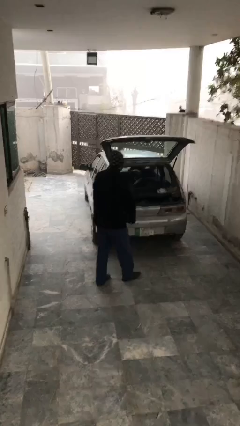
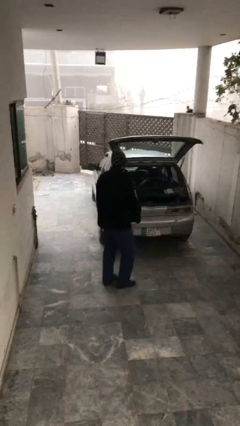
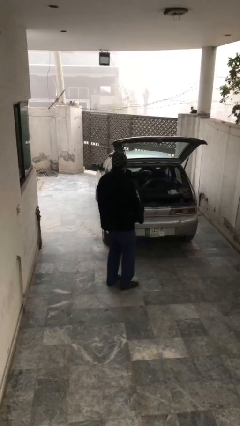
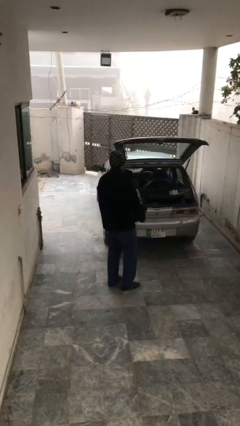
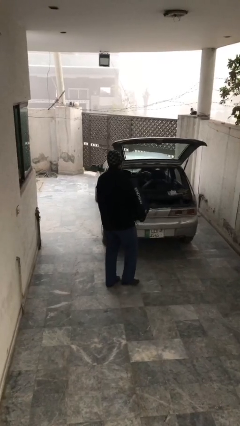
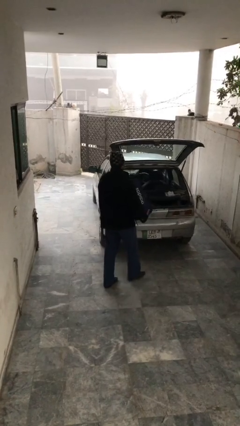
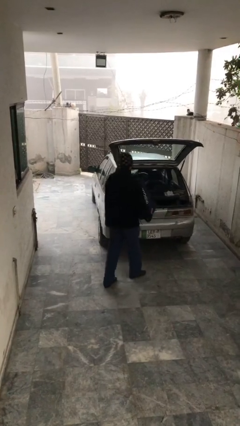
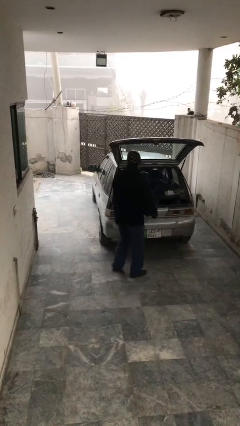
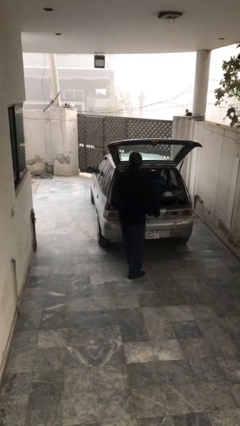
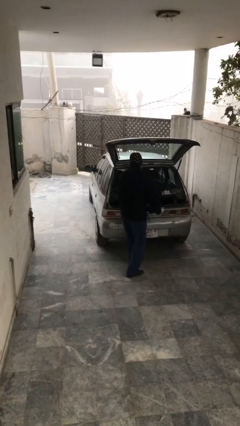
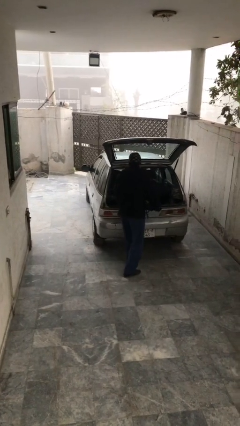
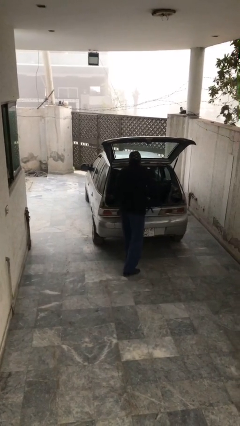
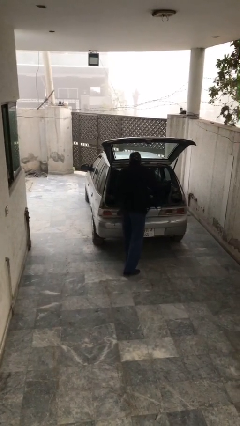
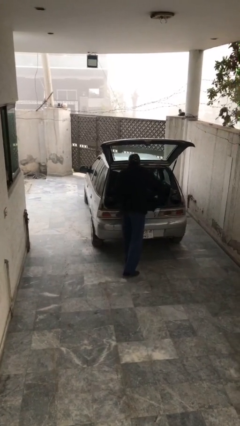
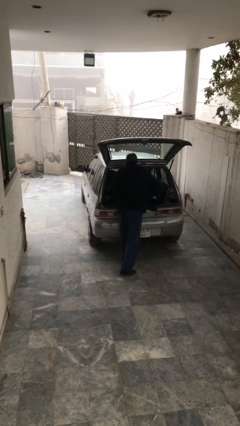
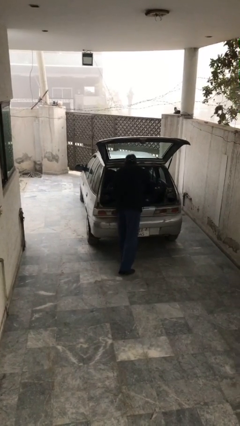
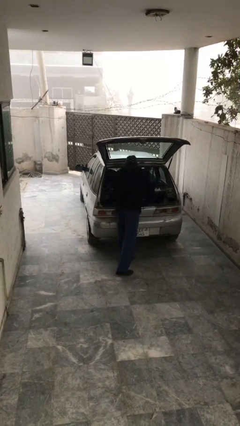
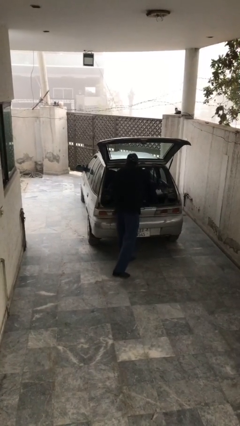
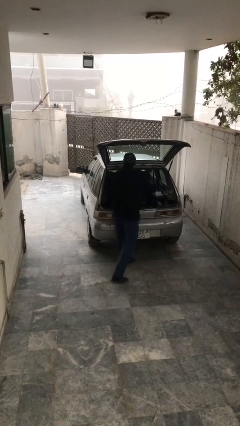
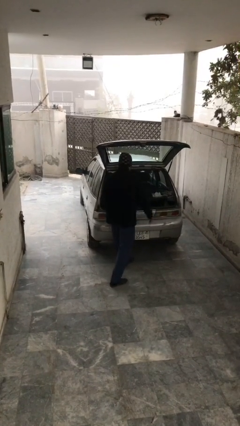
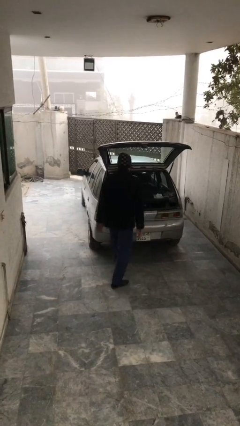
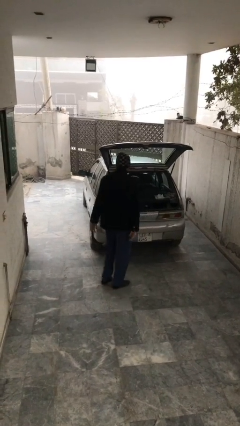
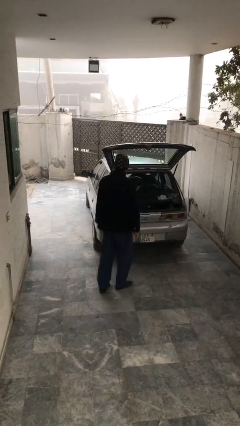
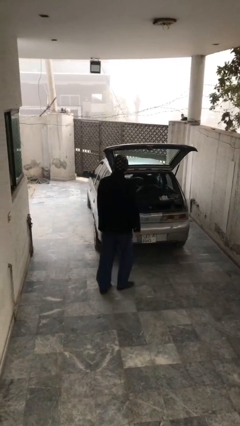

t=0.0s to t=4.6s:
person loads car

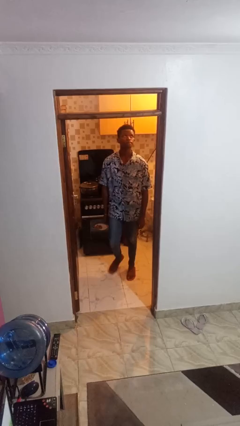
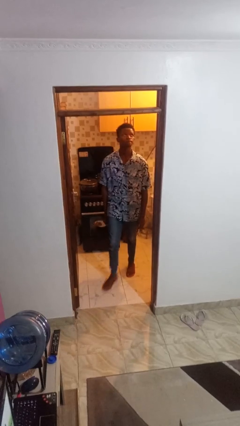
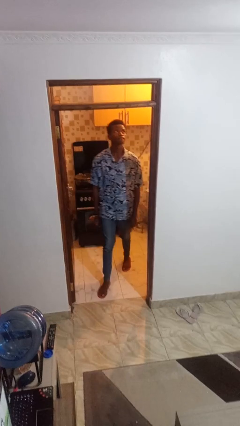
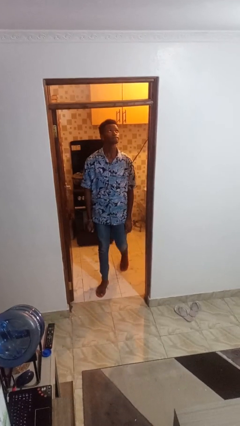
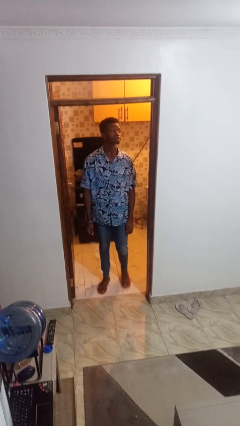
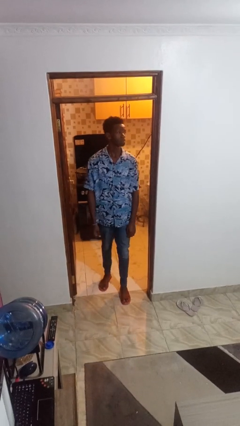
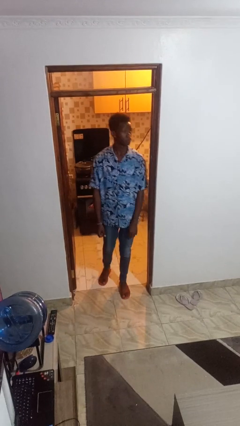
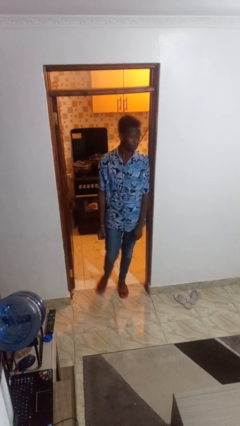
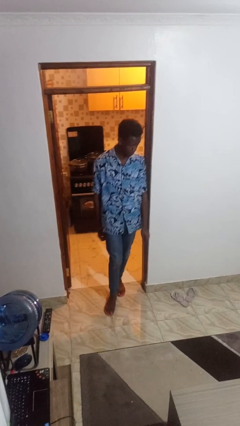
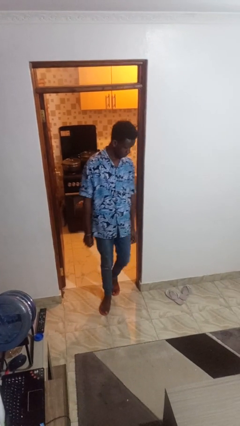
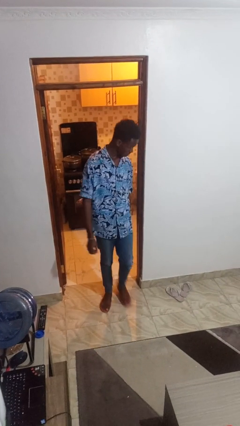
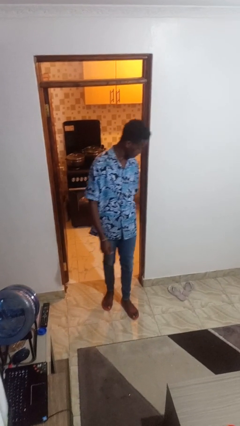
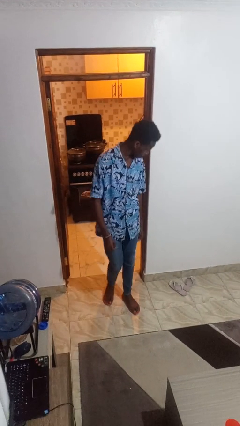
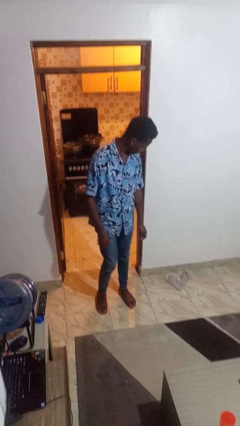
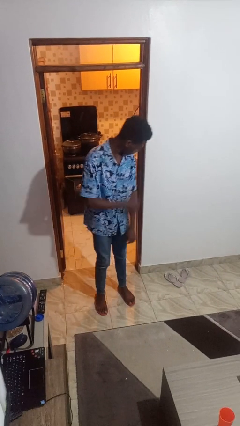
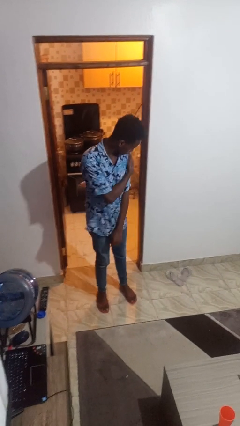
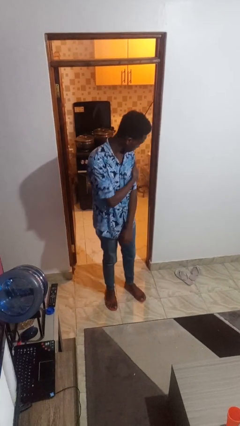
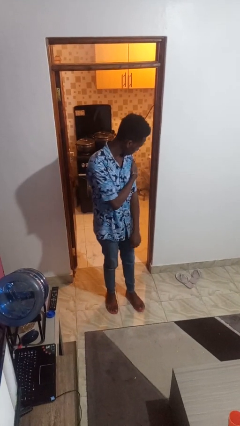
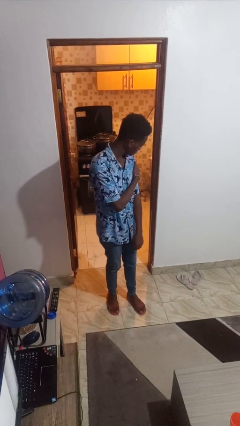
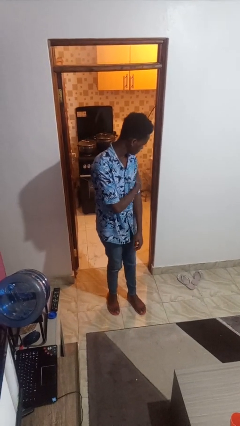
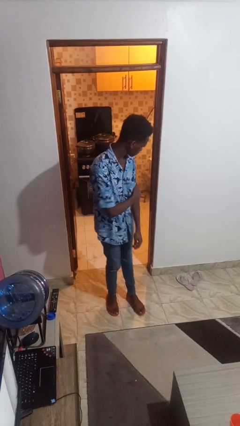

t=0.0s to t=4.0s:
person bumps into wall

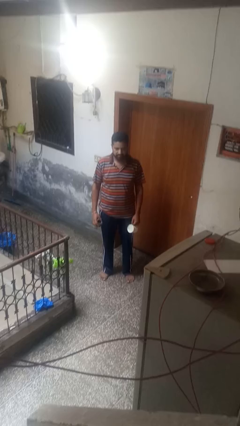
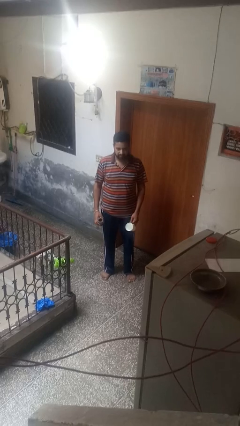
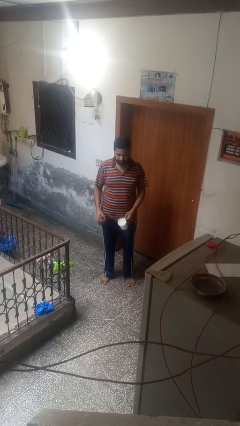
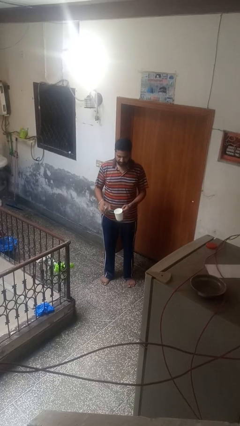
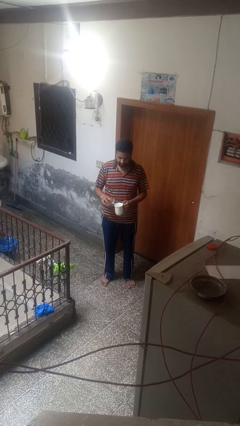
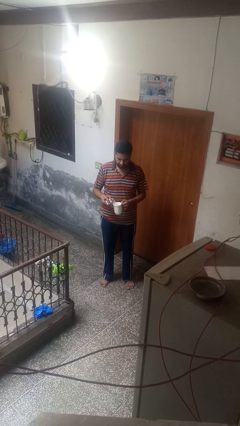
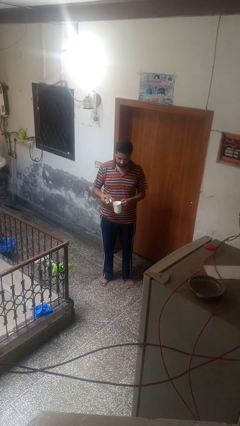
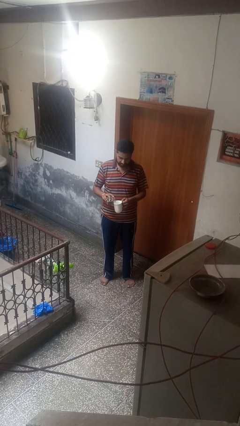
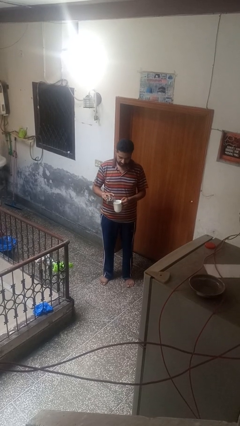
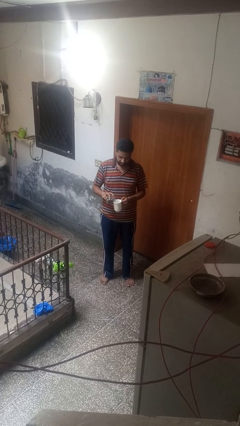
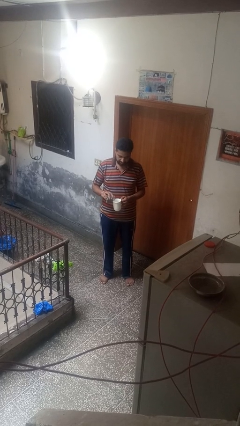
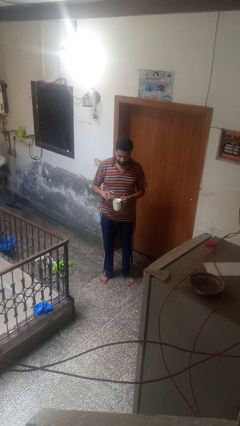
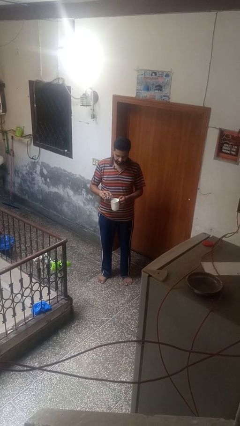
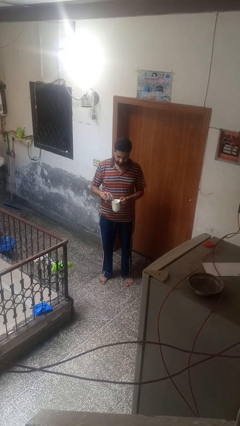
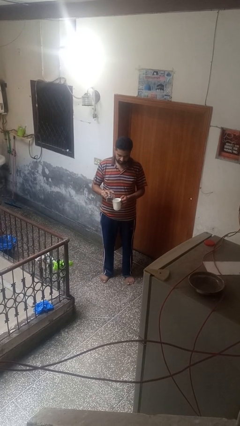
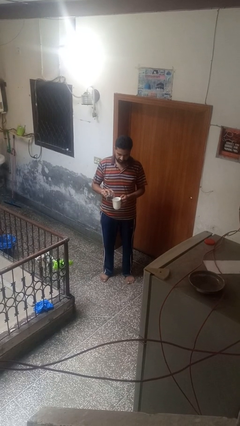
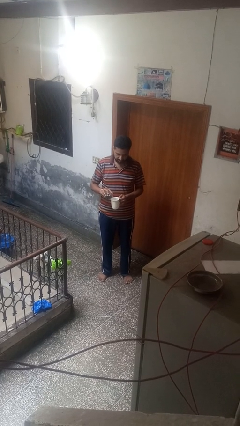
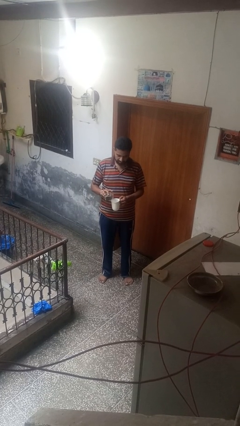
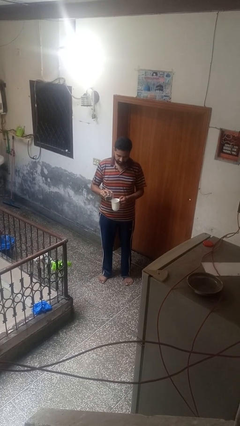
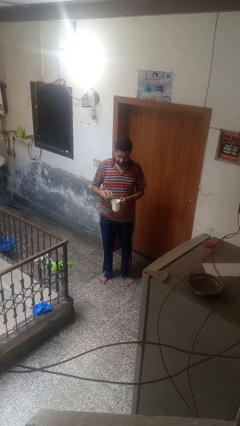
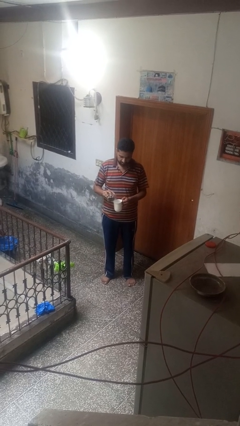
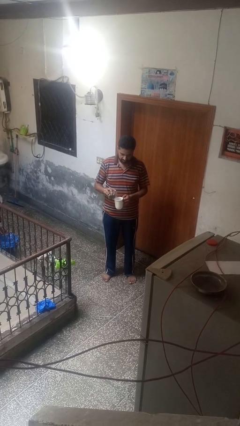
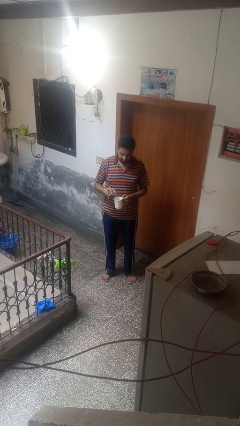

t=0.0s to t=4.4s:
person pours coffee into mug

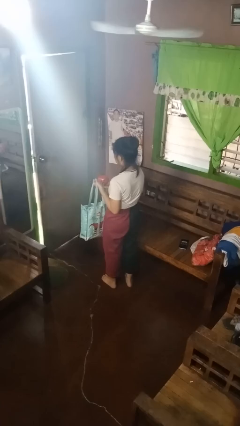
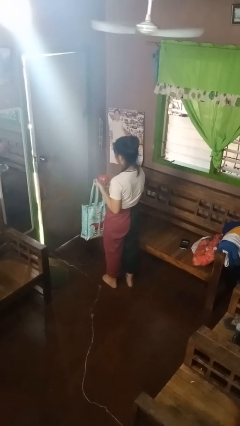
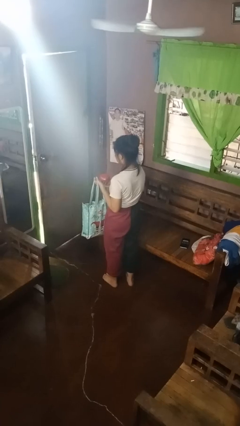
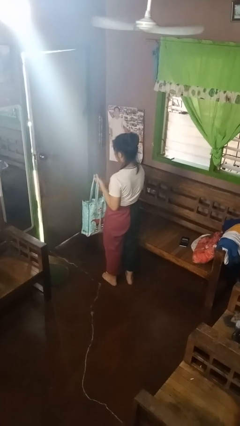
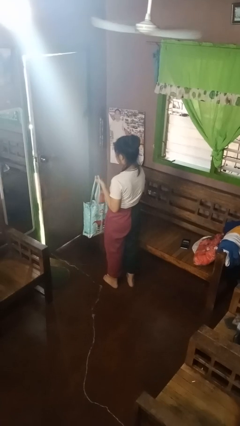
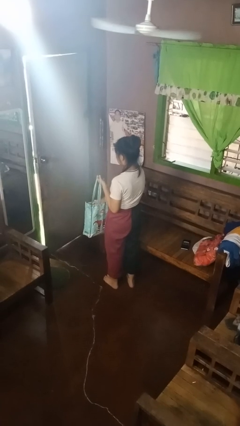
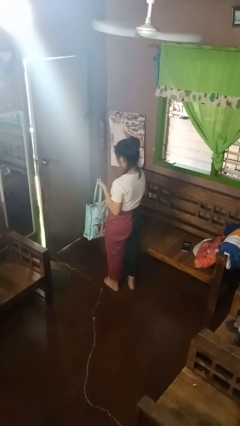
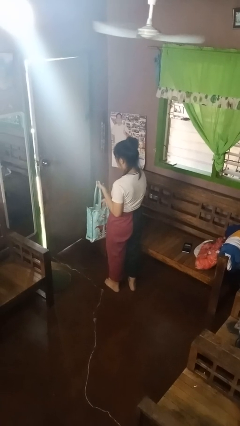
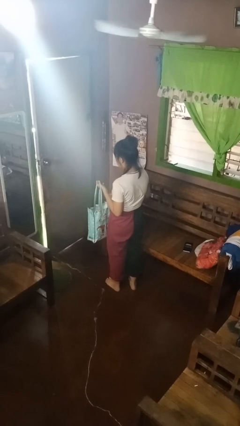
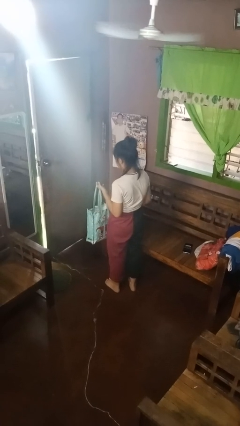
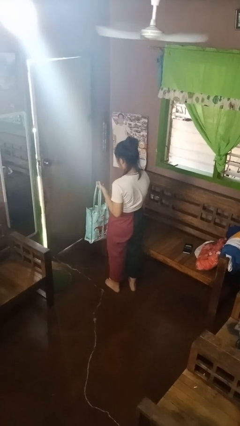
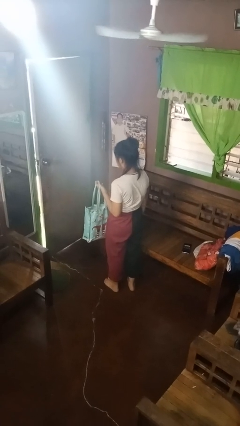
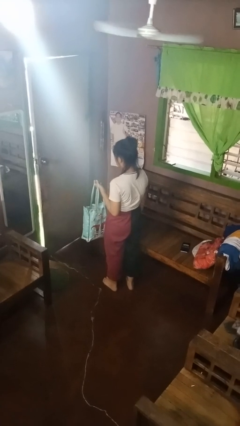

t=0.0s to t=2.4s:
person puts object into bag

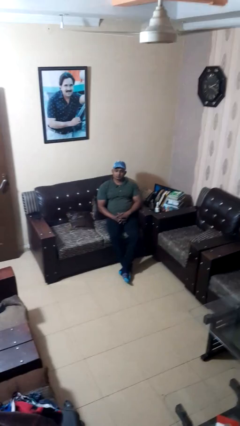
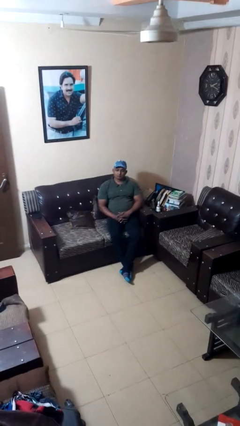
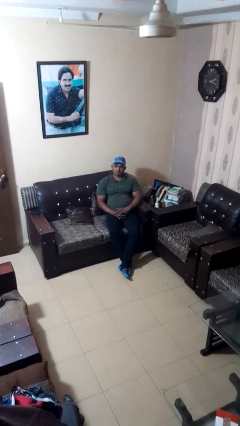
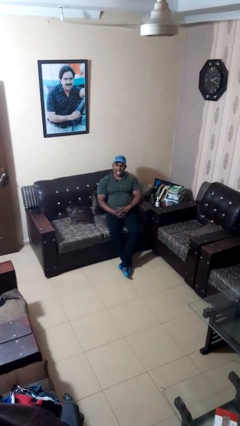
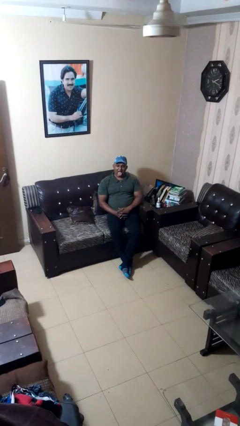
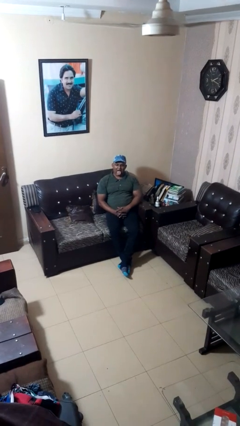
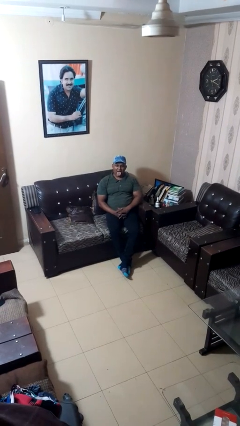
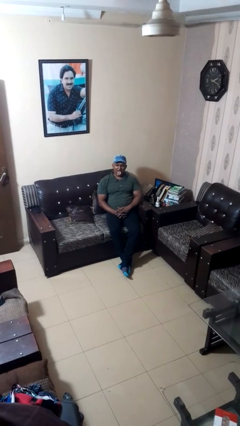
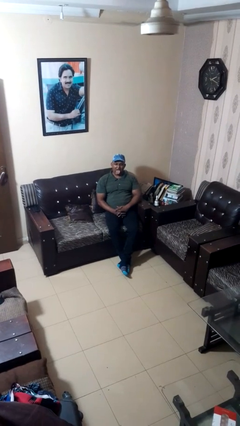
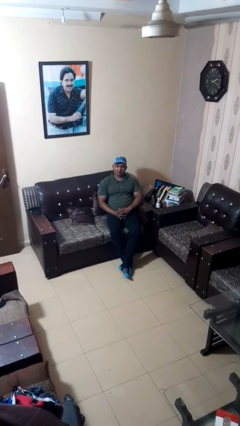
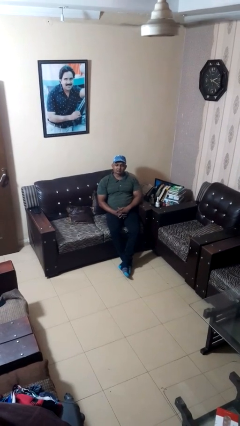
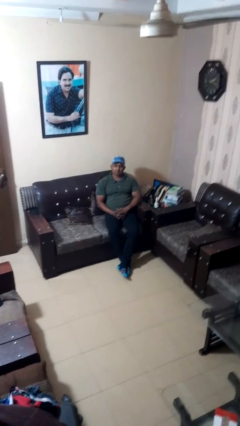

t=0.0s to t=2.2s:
person sticks out tongue
